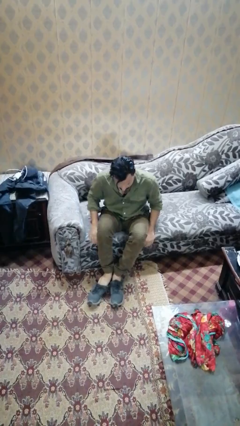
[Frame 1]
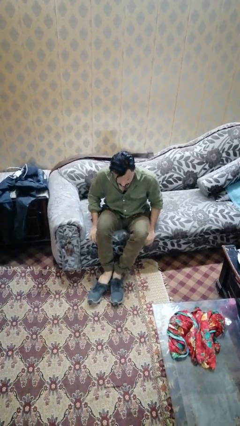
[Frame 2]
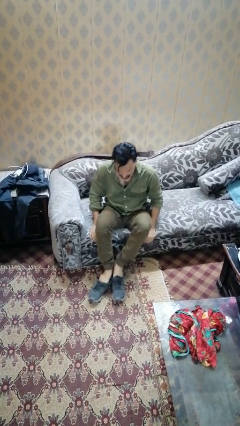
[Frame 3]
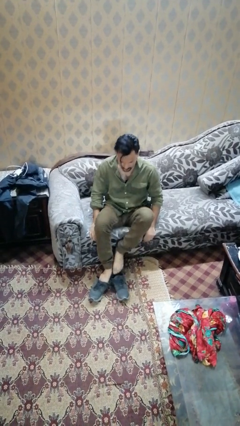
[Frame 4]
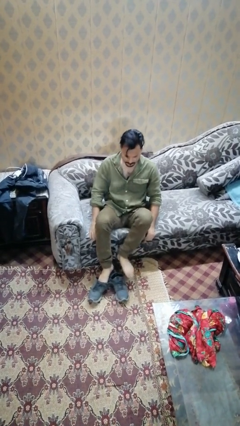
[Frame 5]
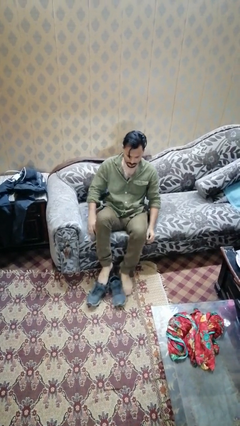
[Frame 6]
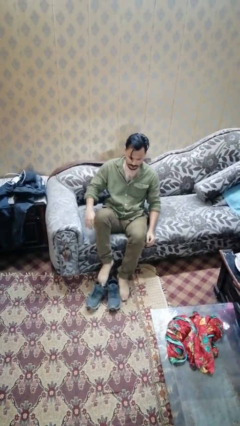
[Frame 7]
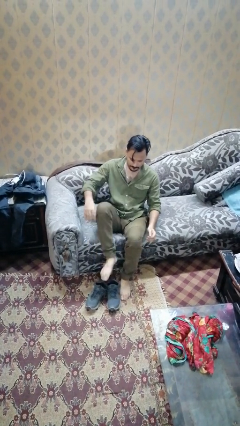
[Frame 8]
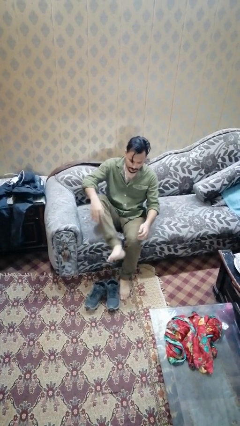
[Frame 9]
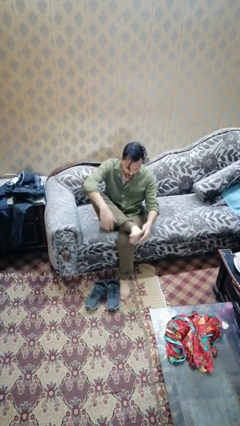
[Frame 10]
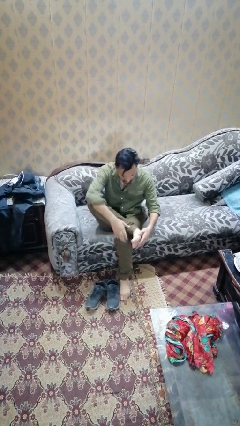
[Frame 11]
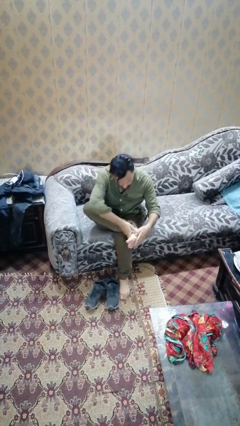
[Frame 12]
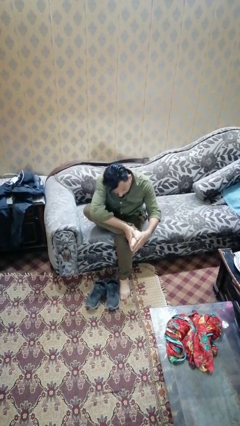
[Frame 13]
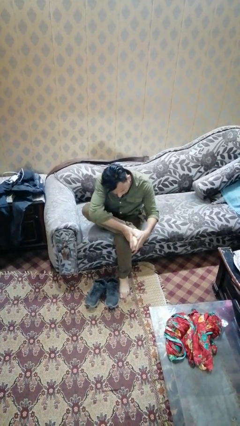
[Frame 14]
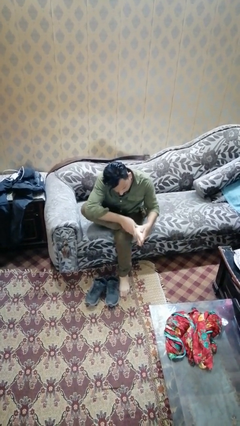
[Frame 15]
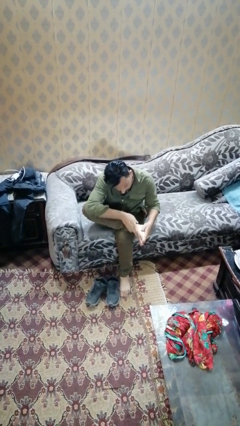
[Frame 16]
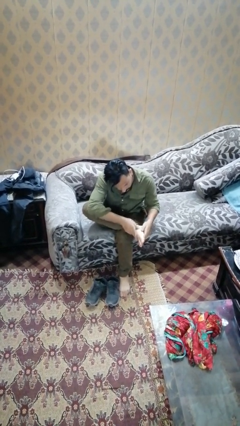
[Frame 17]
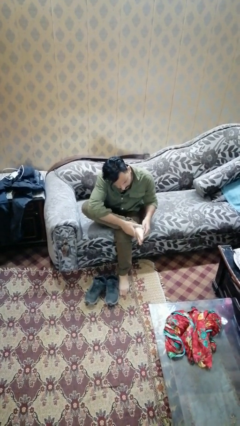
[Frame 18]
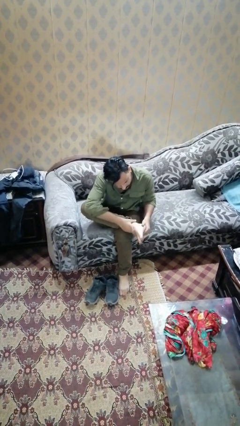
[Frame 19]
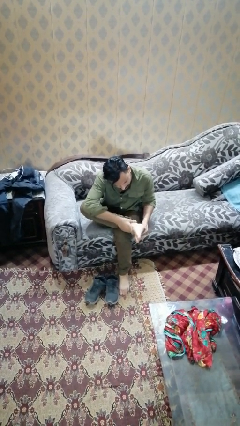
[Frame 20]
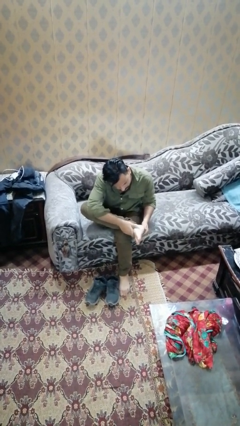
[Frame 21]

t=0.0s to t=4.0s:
person rubs foot

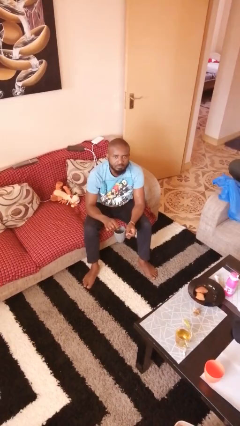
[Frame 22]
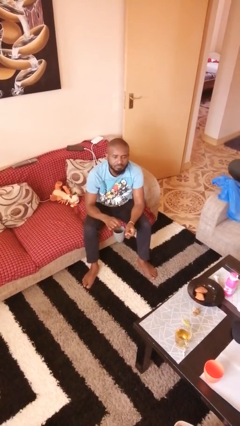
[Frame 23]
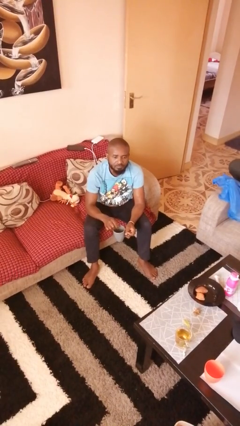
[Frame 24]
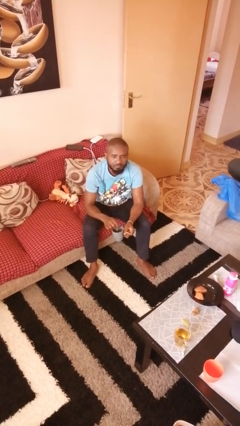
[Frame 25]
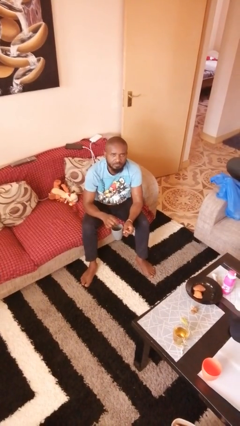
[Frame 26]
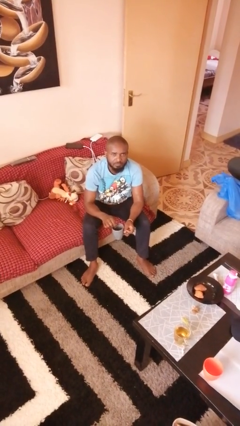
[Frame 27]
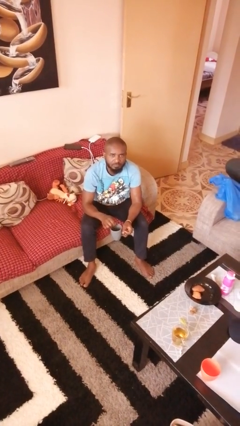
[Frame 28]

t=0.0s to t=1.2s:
person stirs mug

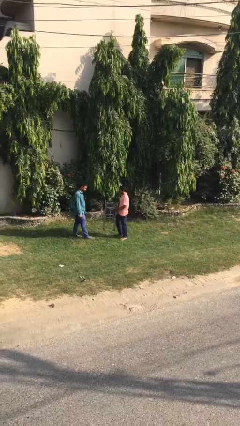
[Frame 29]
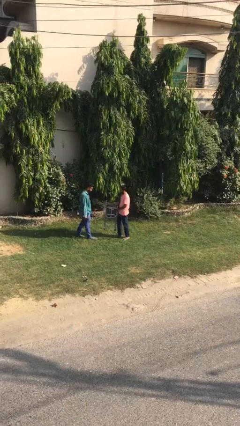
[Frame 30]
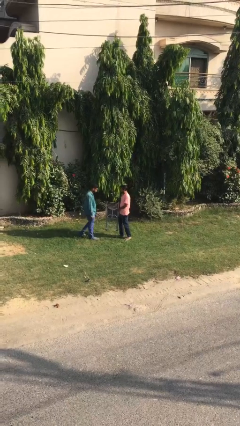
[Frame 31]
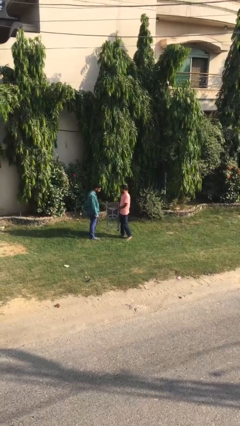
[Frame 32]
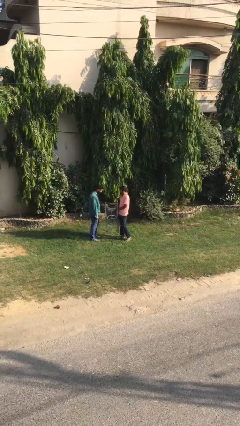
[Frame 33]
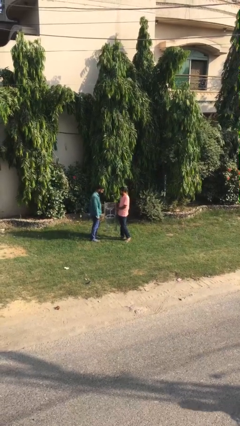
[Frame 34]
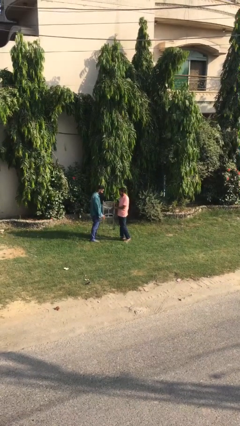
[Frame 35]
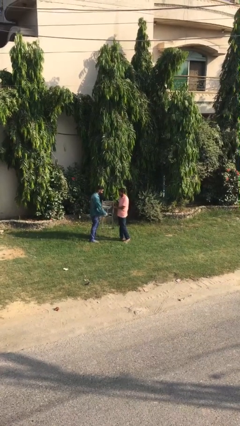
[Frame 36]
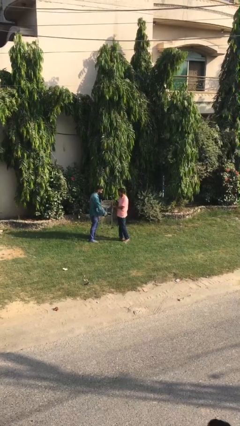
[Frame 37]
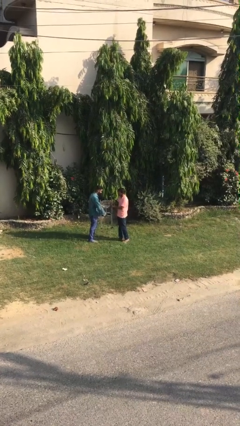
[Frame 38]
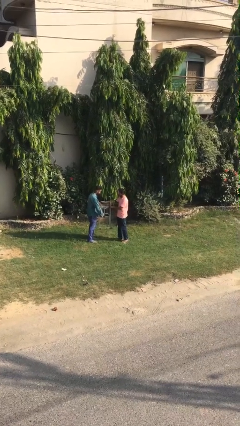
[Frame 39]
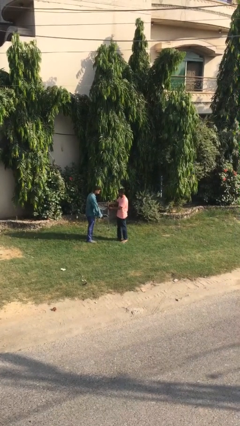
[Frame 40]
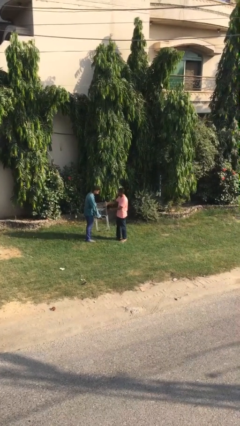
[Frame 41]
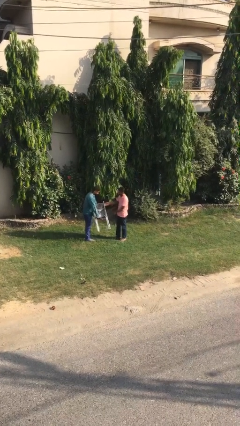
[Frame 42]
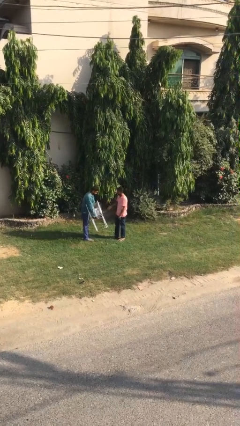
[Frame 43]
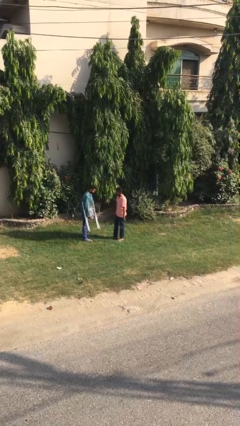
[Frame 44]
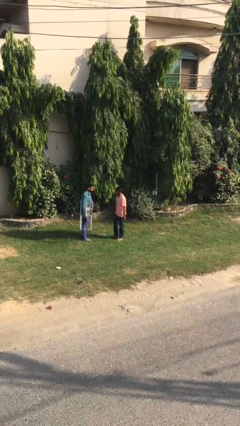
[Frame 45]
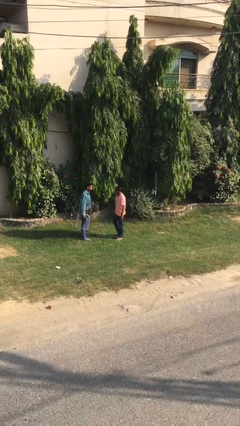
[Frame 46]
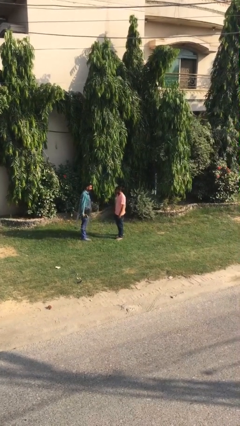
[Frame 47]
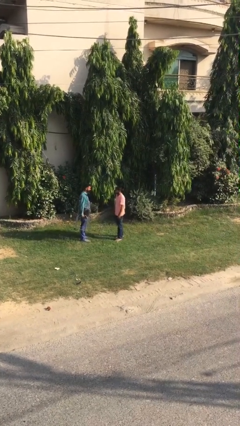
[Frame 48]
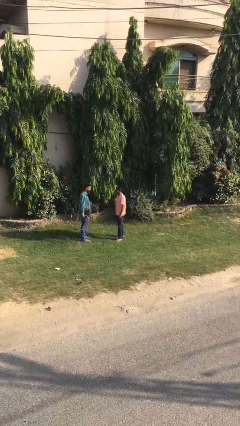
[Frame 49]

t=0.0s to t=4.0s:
person transfers object to person

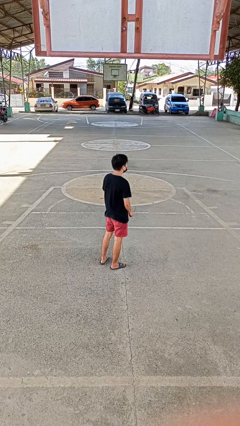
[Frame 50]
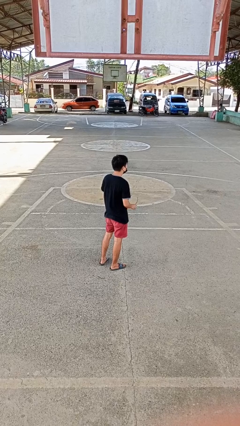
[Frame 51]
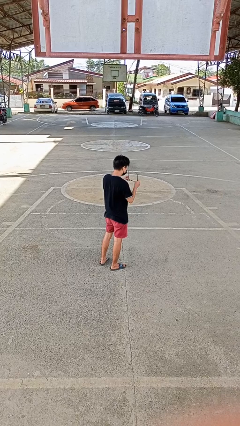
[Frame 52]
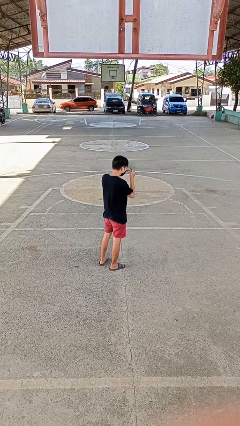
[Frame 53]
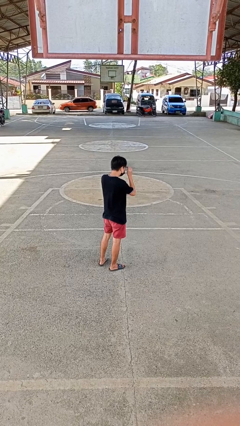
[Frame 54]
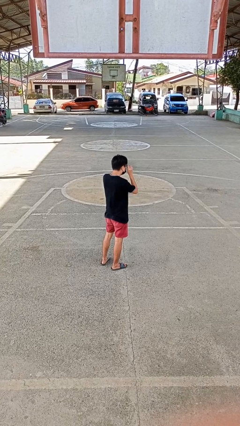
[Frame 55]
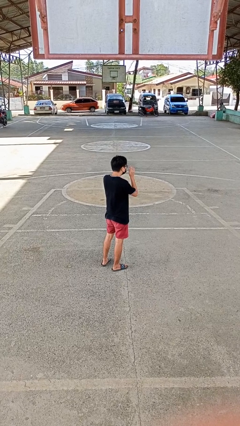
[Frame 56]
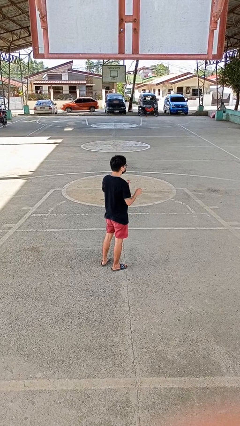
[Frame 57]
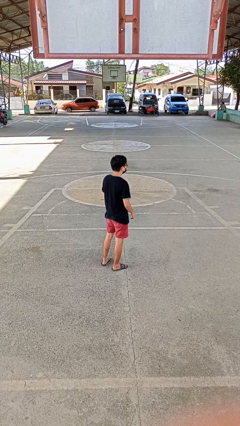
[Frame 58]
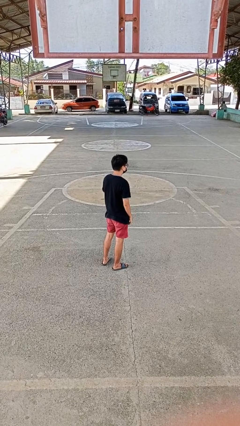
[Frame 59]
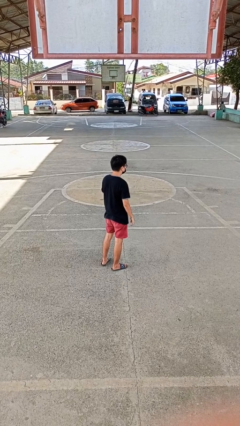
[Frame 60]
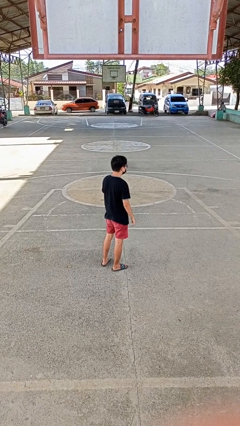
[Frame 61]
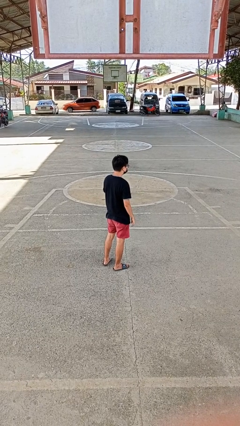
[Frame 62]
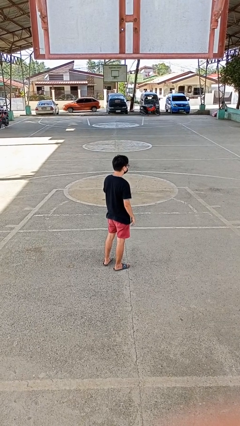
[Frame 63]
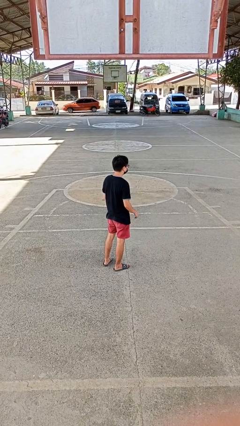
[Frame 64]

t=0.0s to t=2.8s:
person puts on glasses

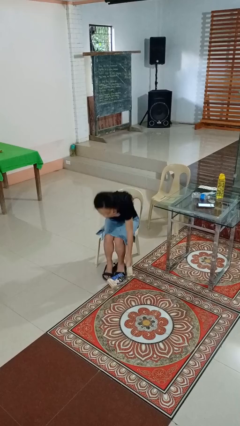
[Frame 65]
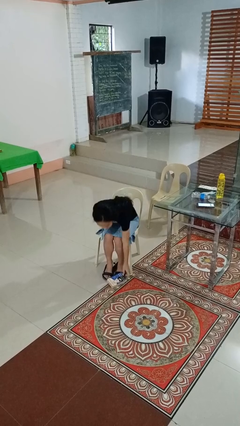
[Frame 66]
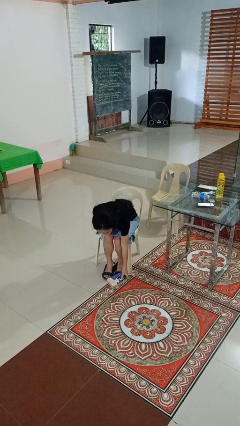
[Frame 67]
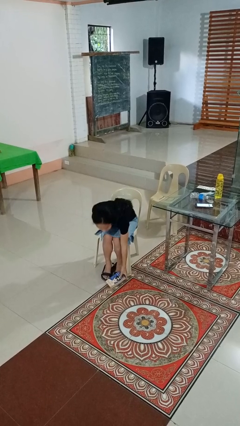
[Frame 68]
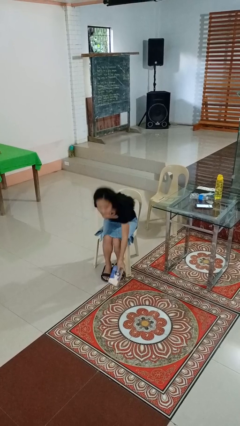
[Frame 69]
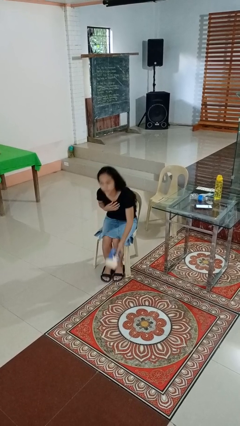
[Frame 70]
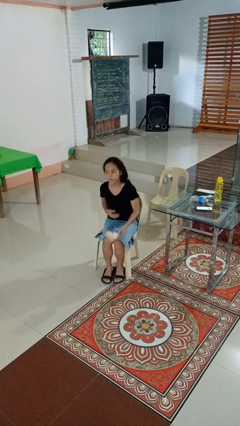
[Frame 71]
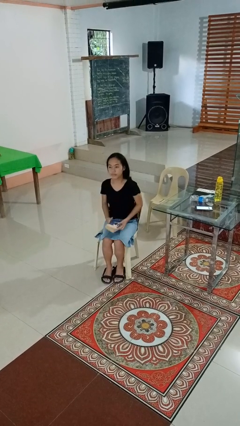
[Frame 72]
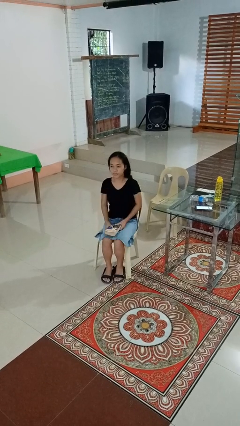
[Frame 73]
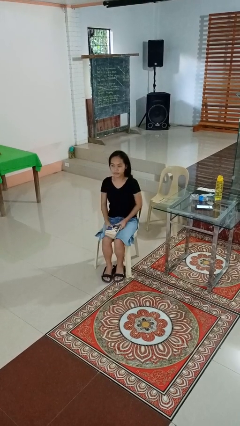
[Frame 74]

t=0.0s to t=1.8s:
person picks up object from floor

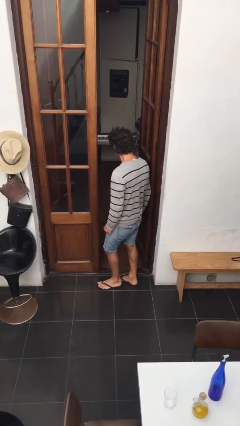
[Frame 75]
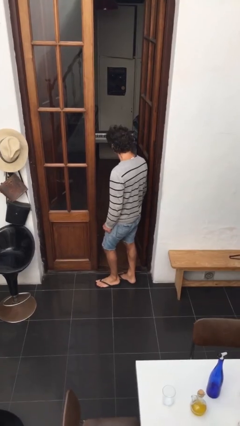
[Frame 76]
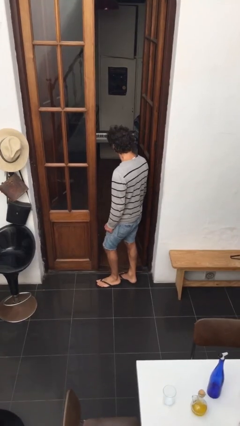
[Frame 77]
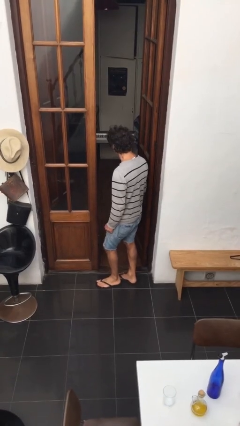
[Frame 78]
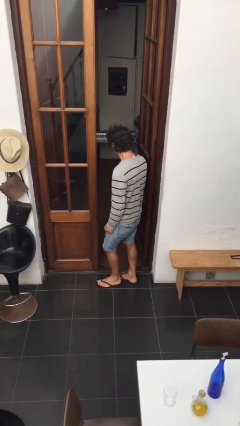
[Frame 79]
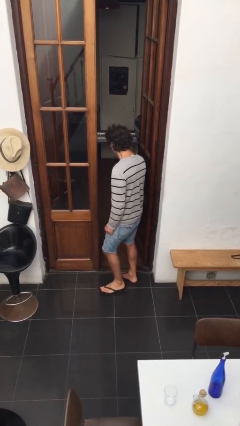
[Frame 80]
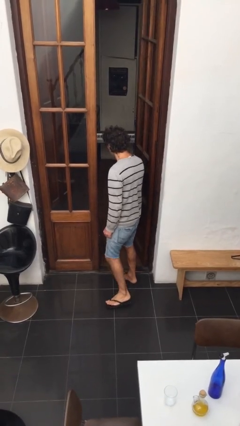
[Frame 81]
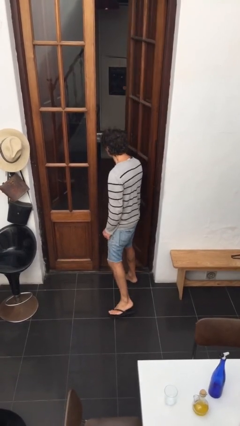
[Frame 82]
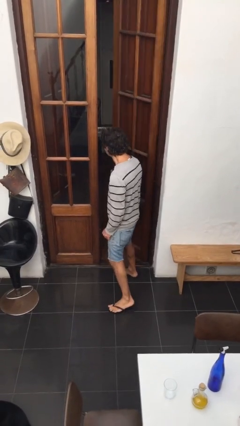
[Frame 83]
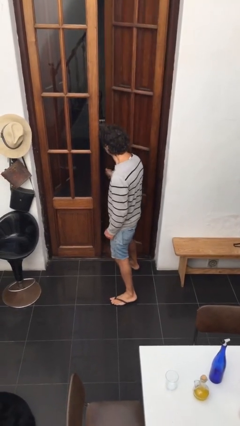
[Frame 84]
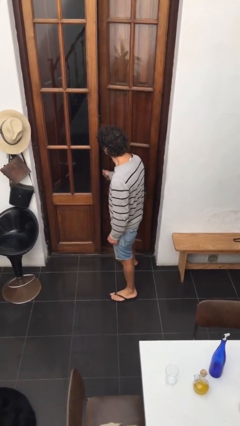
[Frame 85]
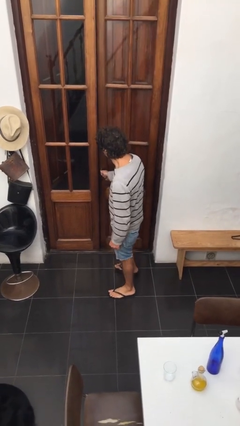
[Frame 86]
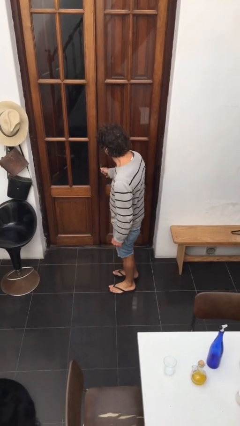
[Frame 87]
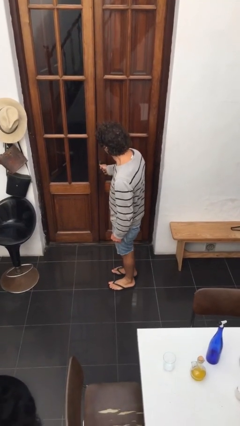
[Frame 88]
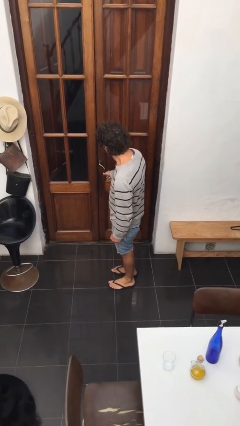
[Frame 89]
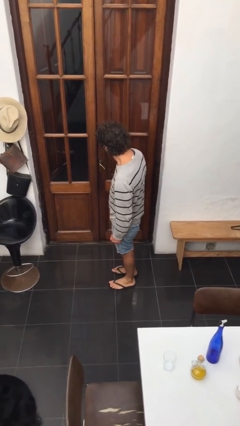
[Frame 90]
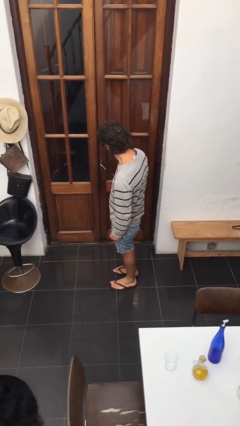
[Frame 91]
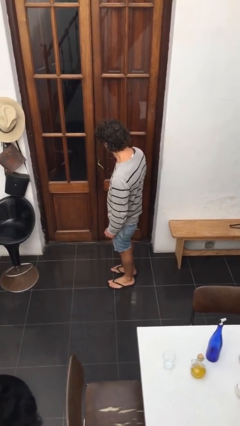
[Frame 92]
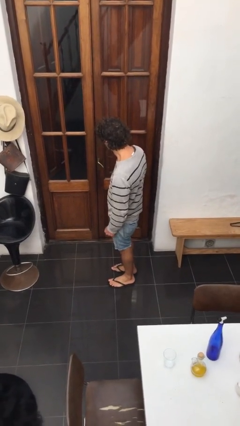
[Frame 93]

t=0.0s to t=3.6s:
person closes facility door

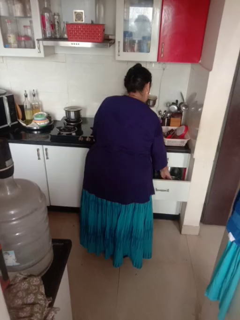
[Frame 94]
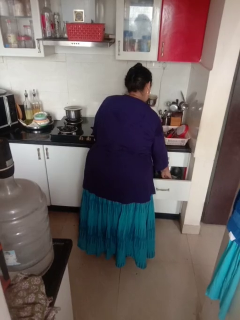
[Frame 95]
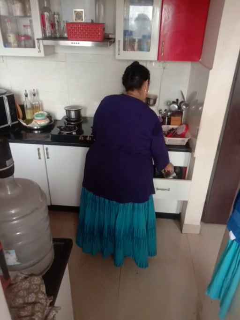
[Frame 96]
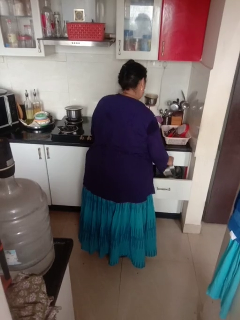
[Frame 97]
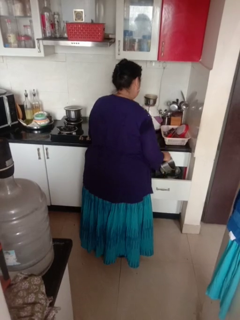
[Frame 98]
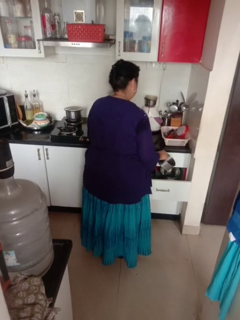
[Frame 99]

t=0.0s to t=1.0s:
person takes object from kitchen drawer
